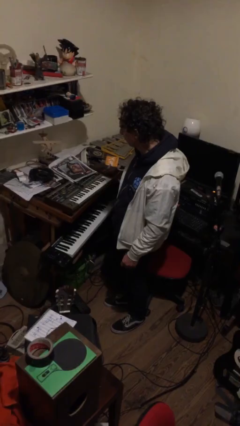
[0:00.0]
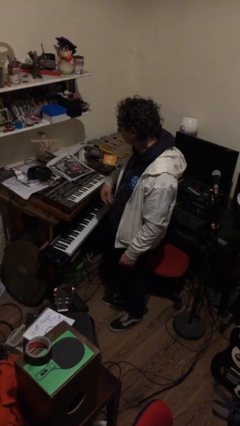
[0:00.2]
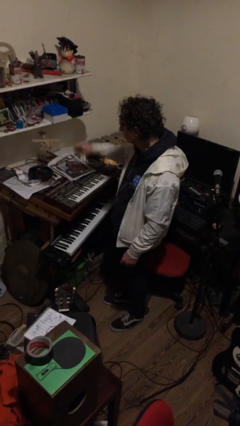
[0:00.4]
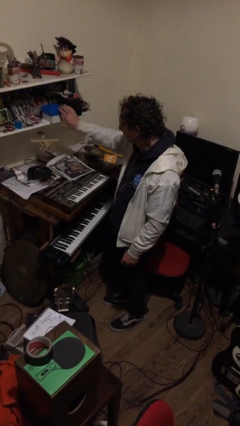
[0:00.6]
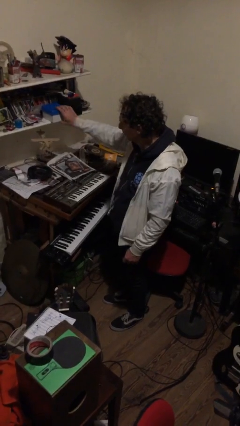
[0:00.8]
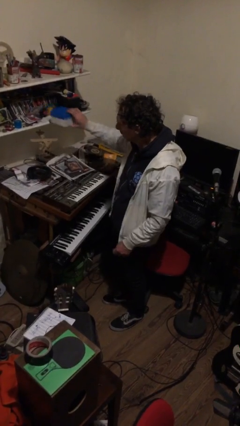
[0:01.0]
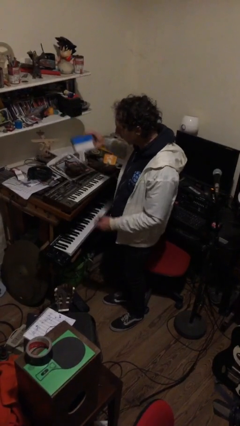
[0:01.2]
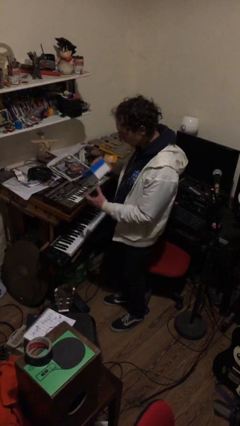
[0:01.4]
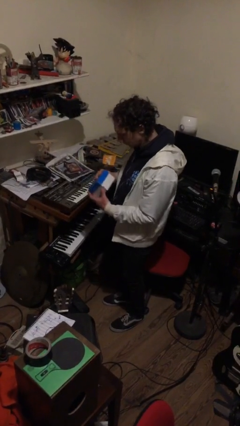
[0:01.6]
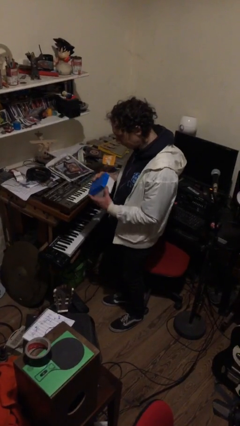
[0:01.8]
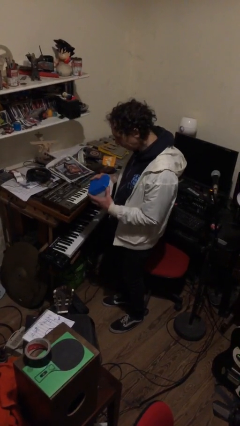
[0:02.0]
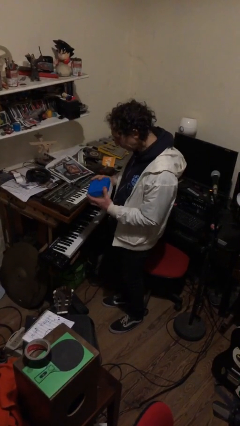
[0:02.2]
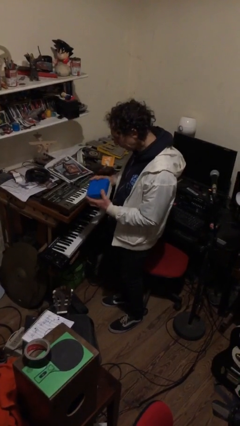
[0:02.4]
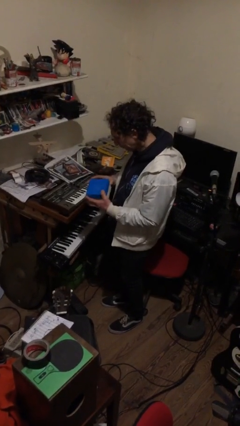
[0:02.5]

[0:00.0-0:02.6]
person picks up object from countertop

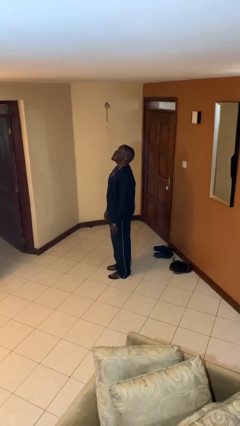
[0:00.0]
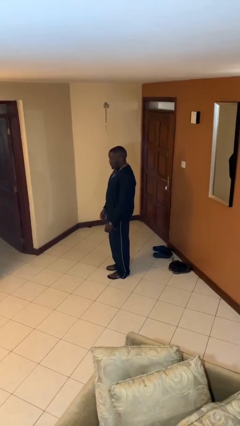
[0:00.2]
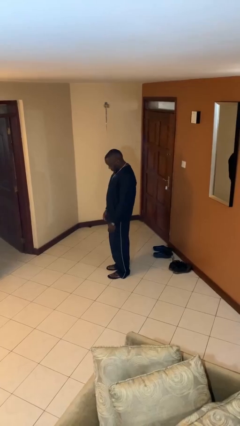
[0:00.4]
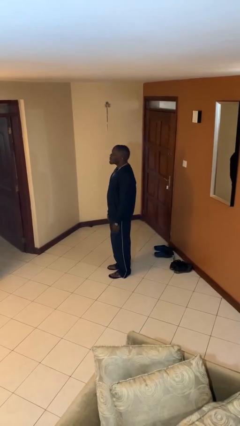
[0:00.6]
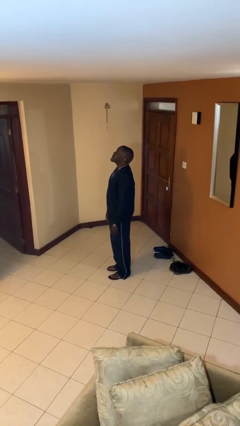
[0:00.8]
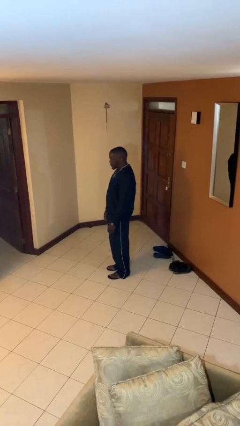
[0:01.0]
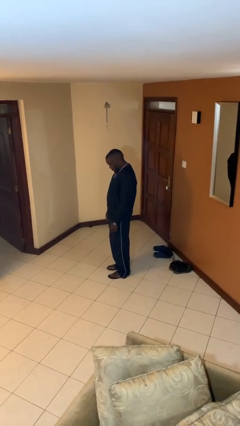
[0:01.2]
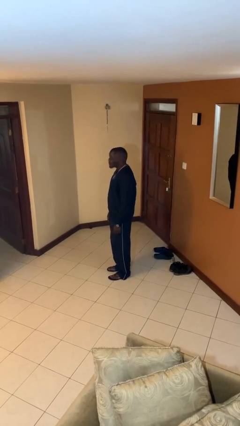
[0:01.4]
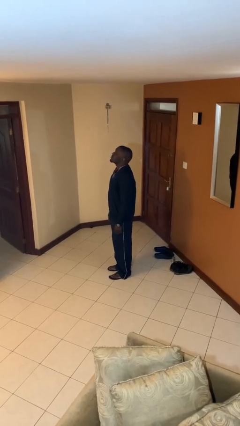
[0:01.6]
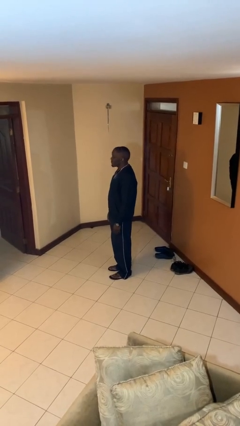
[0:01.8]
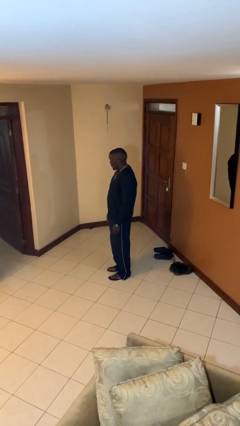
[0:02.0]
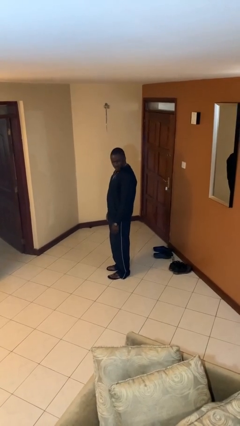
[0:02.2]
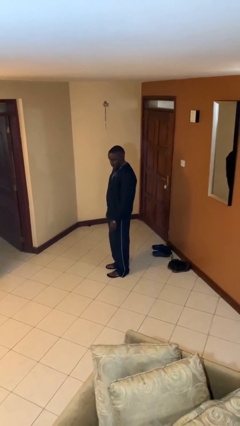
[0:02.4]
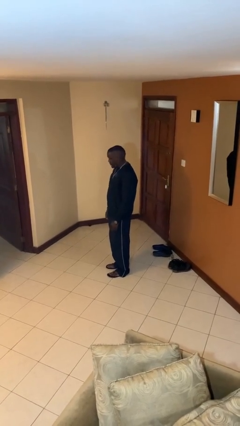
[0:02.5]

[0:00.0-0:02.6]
person nods head

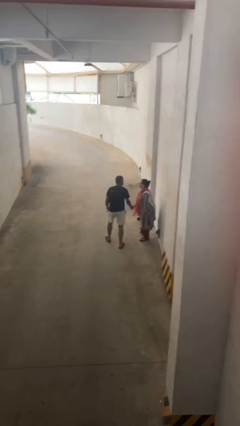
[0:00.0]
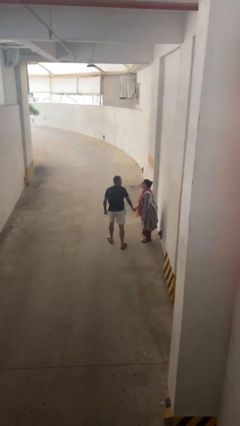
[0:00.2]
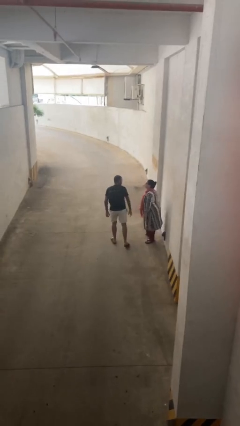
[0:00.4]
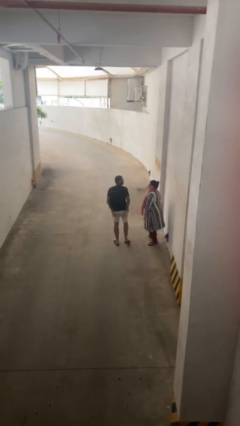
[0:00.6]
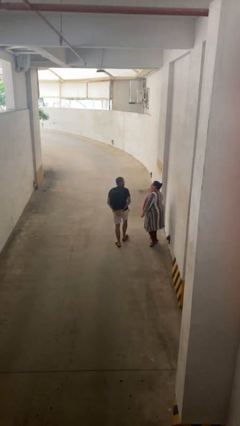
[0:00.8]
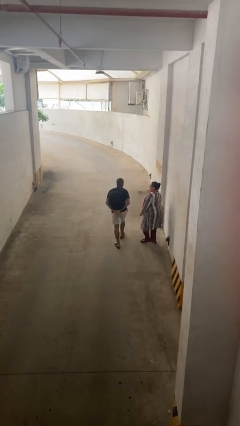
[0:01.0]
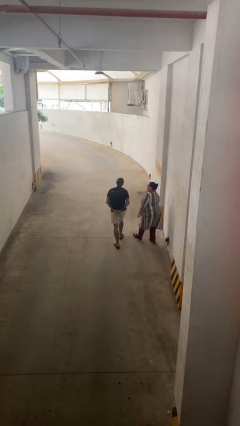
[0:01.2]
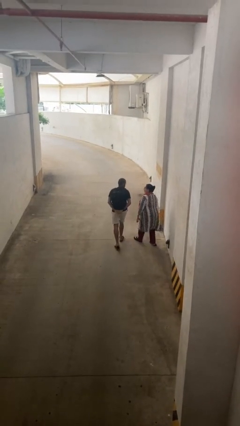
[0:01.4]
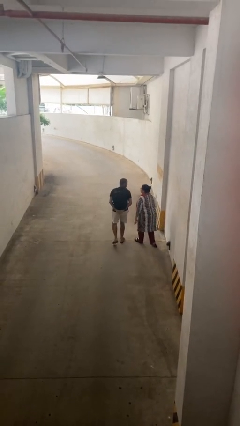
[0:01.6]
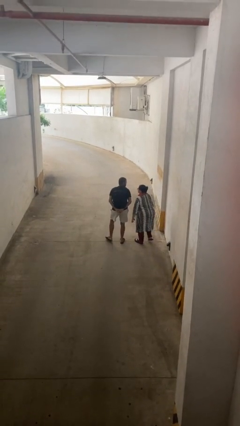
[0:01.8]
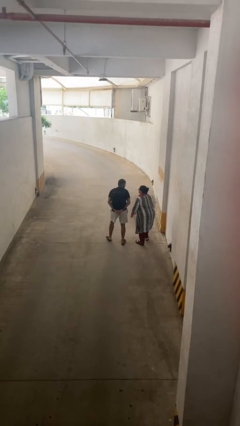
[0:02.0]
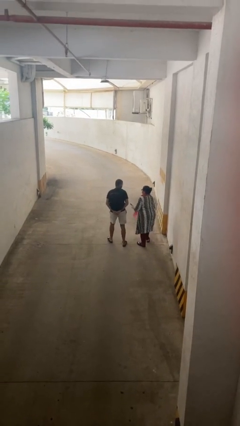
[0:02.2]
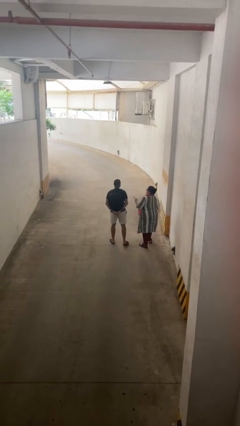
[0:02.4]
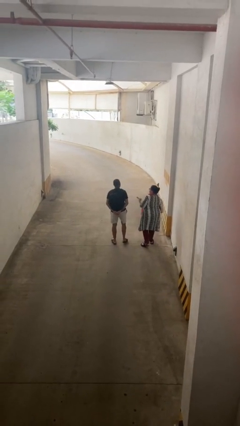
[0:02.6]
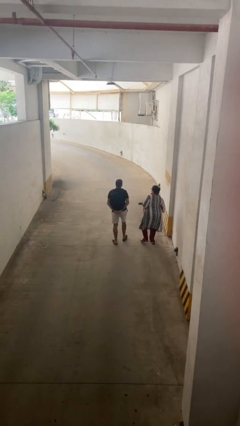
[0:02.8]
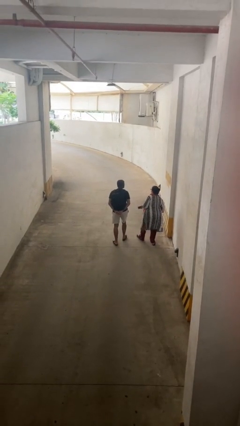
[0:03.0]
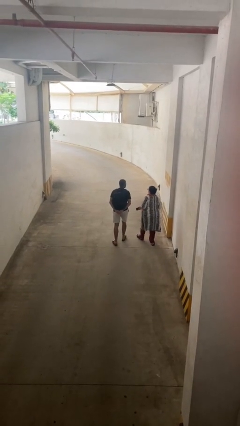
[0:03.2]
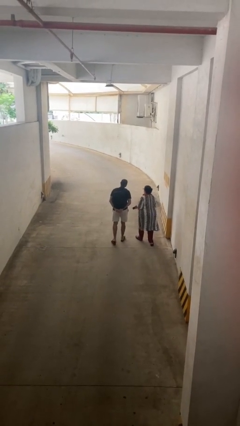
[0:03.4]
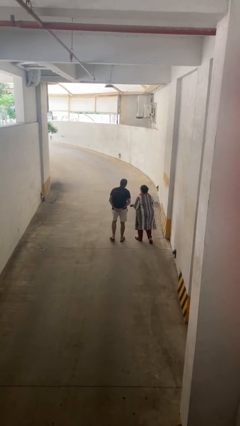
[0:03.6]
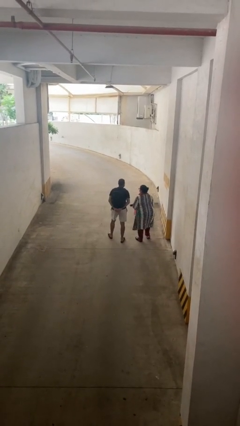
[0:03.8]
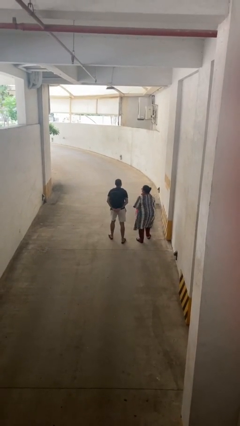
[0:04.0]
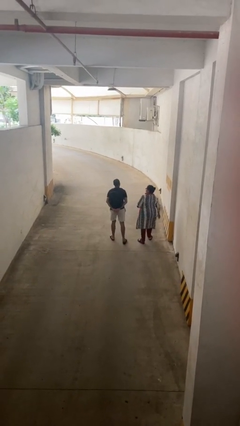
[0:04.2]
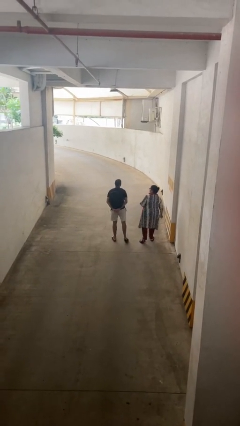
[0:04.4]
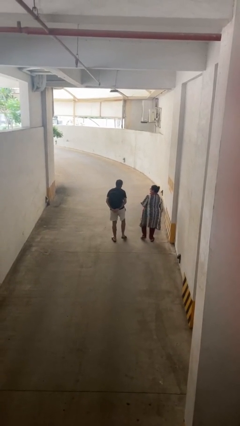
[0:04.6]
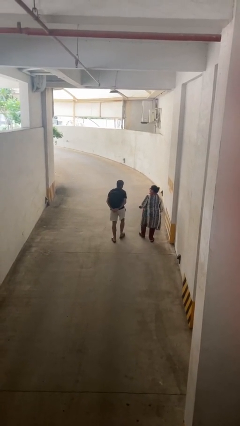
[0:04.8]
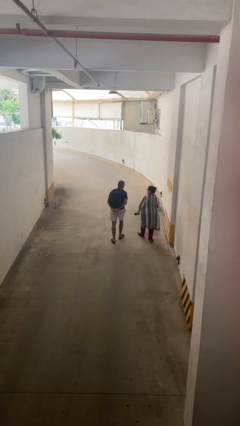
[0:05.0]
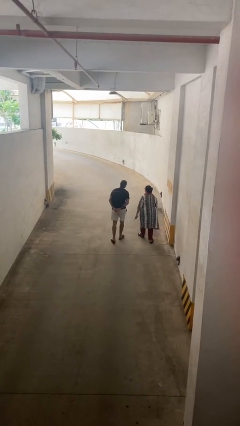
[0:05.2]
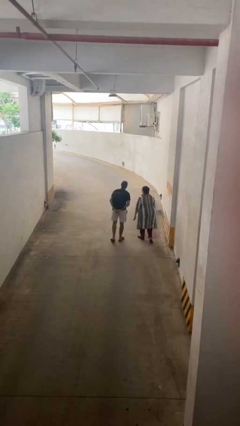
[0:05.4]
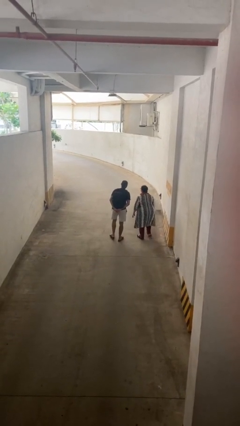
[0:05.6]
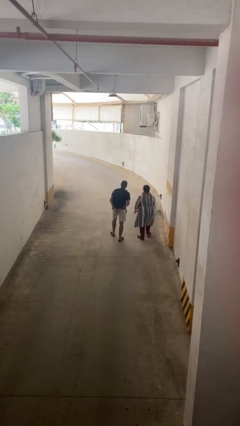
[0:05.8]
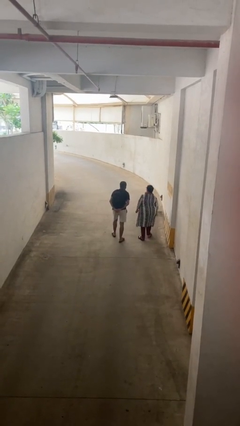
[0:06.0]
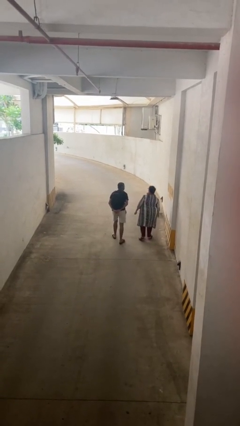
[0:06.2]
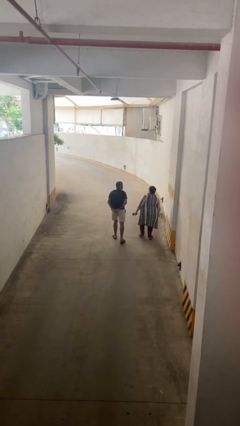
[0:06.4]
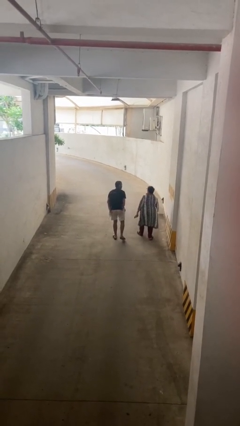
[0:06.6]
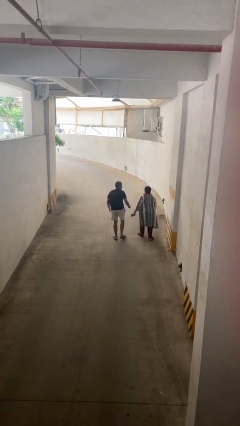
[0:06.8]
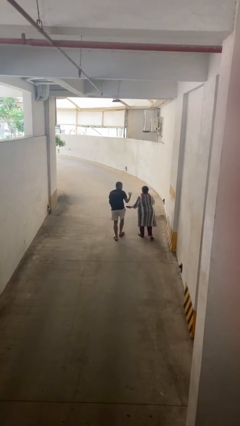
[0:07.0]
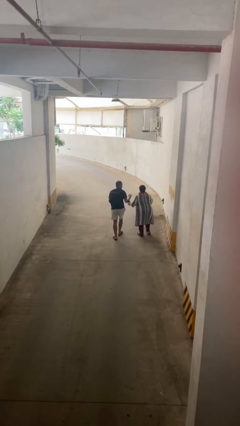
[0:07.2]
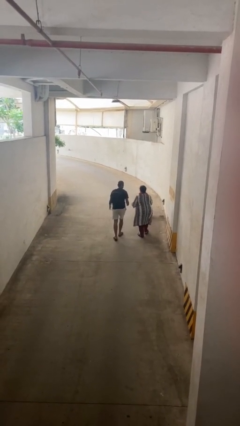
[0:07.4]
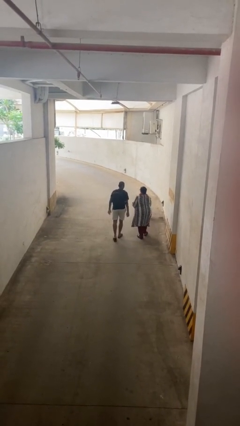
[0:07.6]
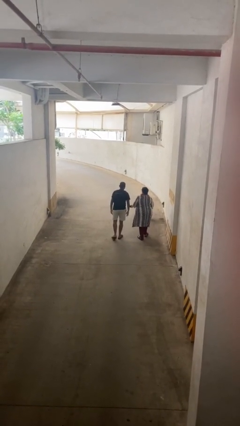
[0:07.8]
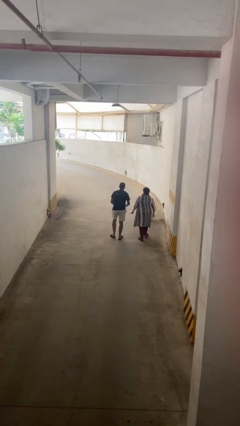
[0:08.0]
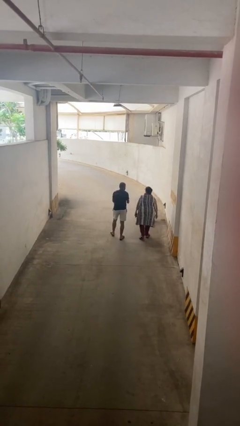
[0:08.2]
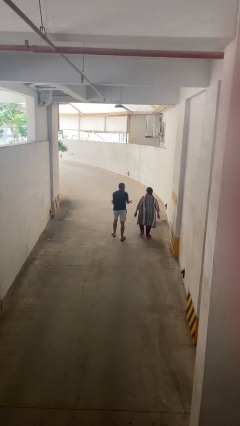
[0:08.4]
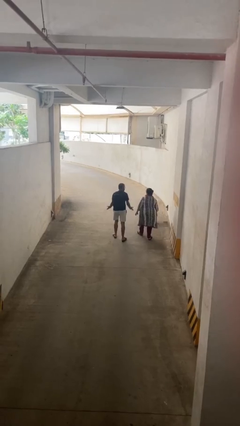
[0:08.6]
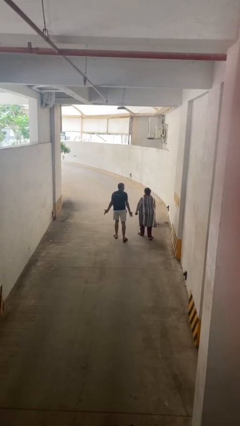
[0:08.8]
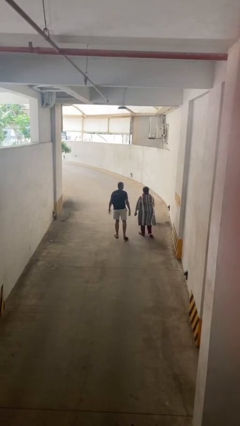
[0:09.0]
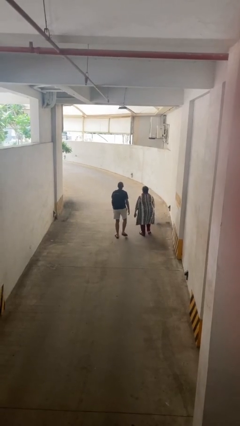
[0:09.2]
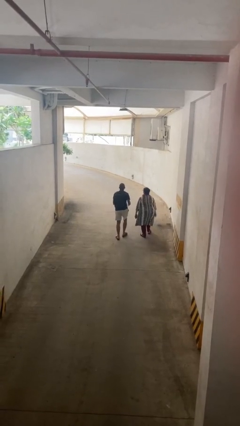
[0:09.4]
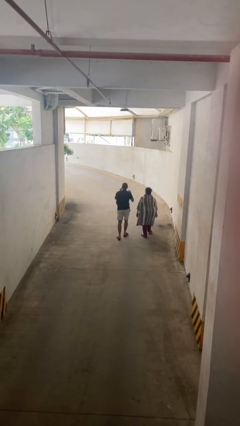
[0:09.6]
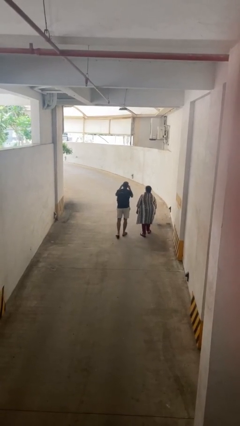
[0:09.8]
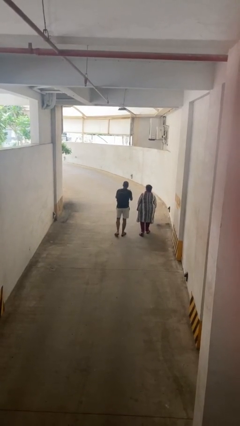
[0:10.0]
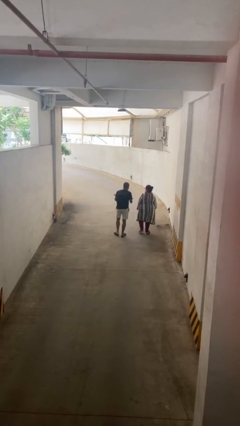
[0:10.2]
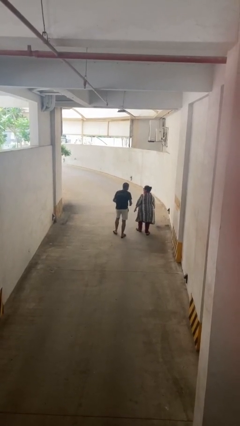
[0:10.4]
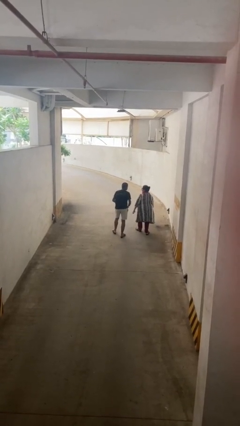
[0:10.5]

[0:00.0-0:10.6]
person talks to person

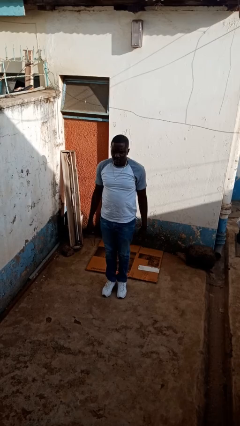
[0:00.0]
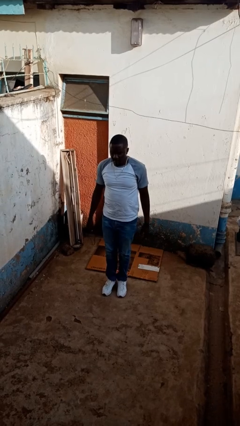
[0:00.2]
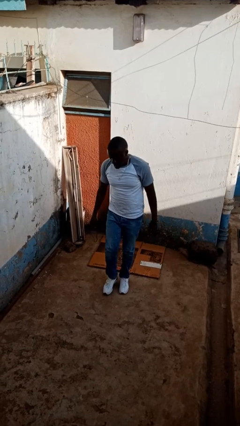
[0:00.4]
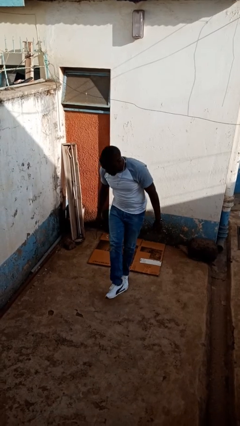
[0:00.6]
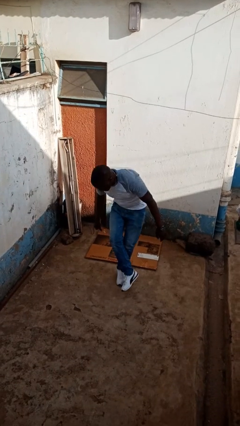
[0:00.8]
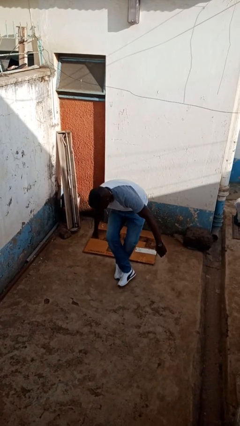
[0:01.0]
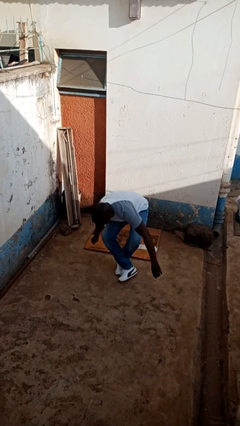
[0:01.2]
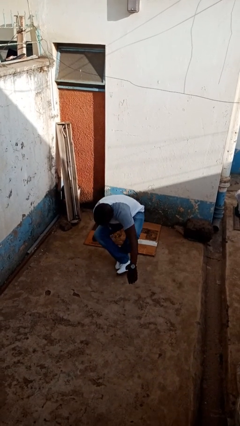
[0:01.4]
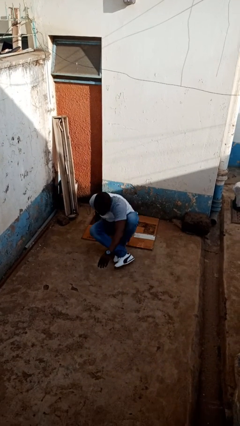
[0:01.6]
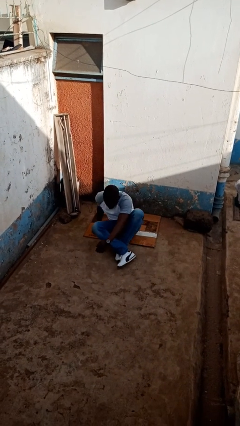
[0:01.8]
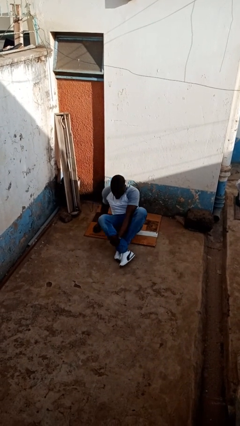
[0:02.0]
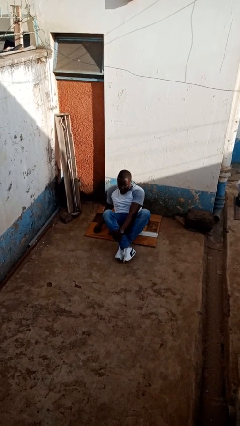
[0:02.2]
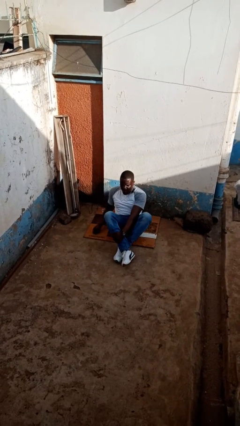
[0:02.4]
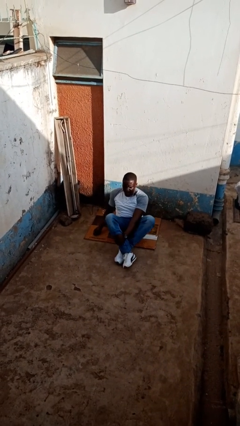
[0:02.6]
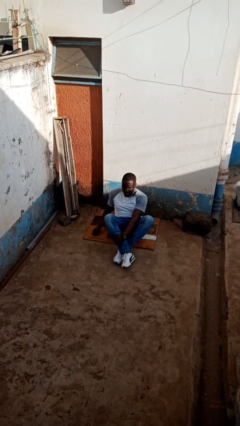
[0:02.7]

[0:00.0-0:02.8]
person sits crisscross
